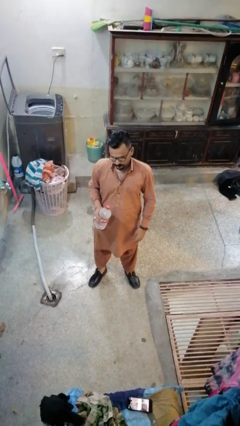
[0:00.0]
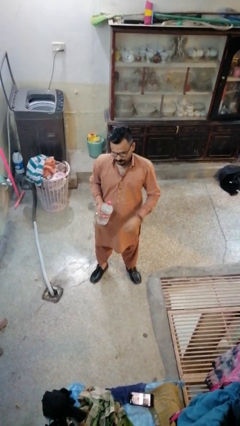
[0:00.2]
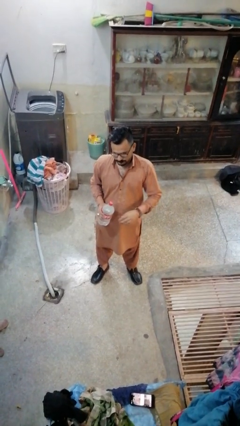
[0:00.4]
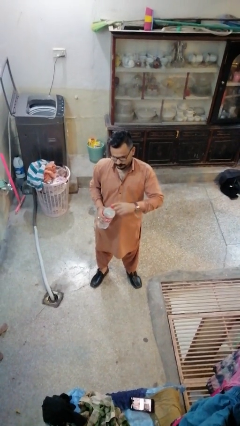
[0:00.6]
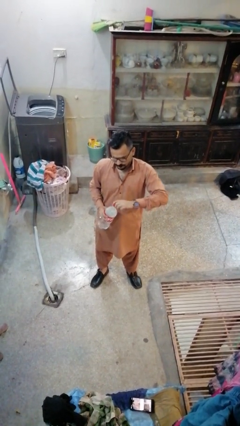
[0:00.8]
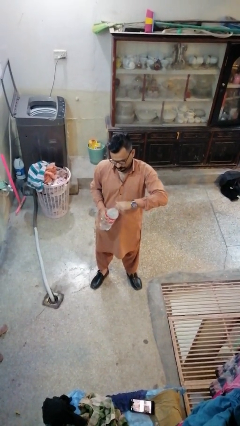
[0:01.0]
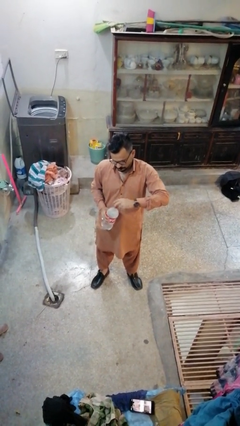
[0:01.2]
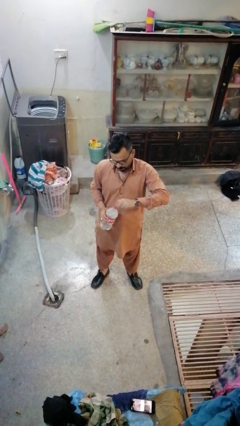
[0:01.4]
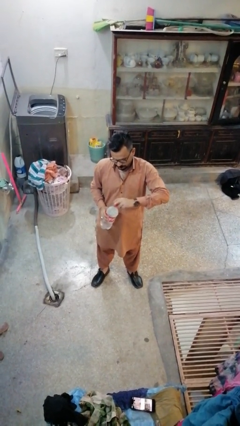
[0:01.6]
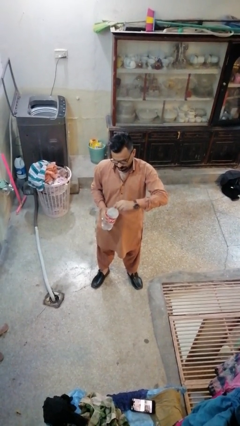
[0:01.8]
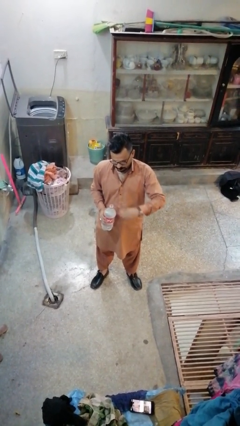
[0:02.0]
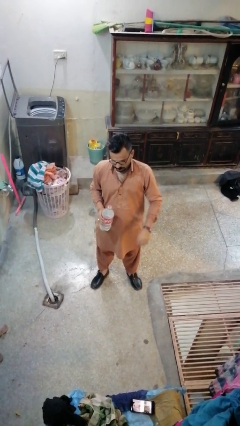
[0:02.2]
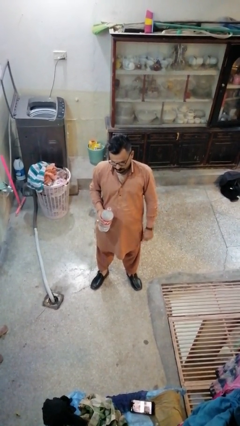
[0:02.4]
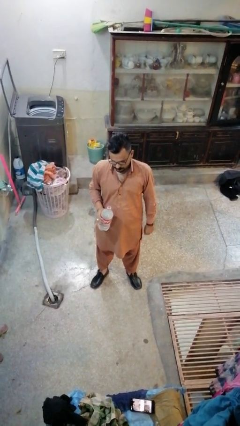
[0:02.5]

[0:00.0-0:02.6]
person unscrews lid from bottle

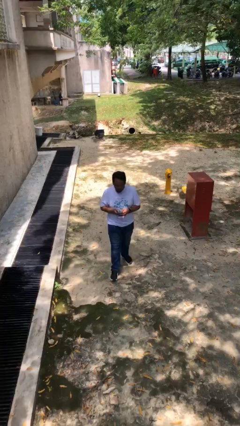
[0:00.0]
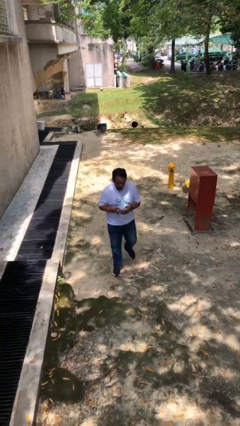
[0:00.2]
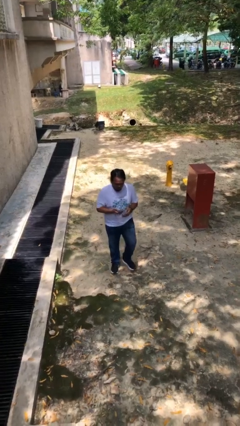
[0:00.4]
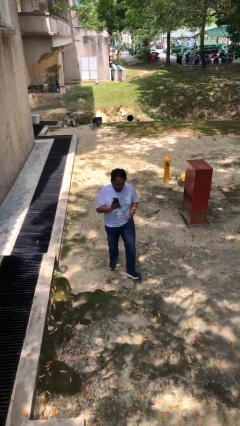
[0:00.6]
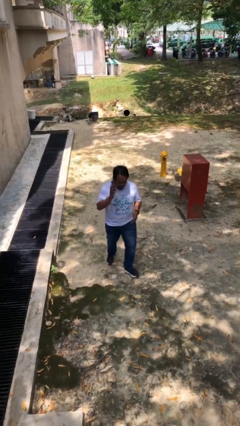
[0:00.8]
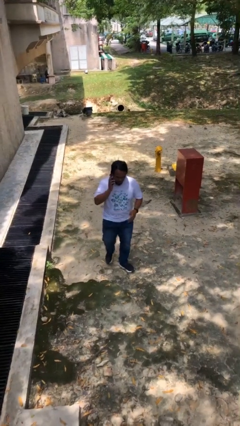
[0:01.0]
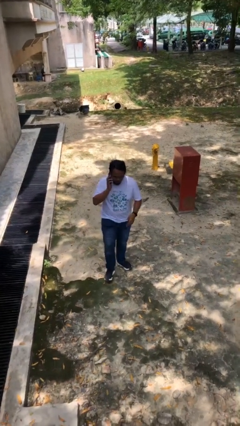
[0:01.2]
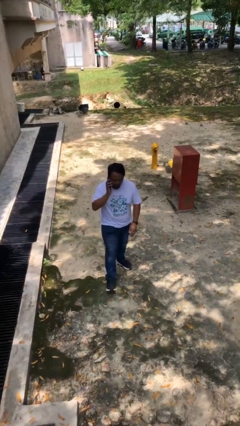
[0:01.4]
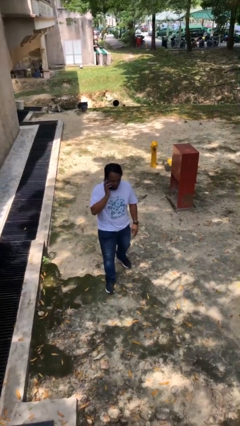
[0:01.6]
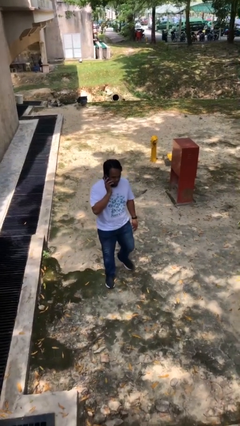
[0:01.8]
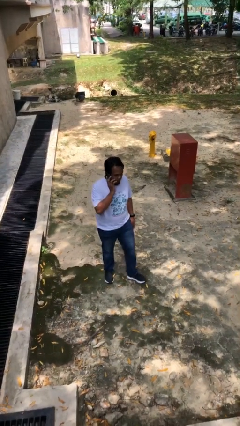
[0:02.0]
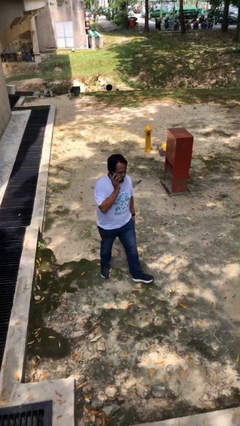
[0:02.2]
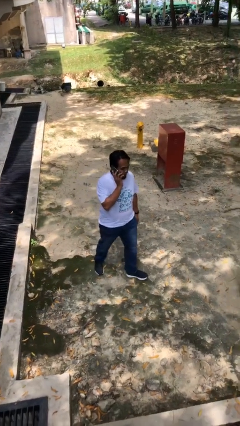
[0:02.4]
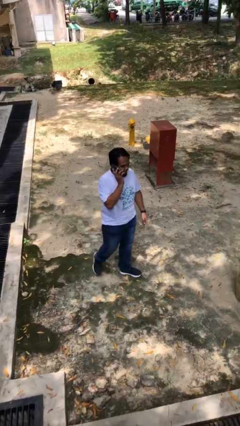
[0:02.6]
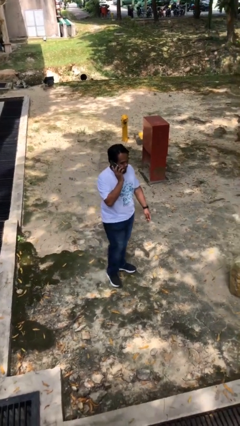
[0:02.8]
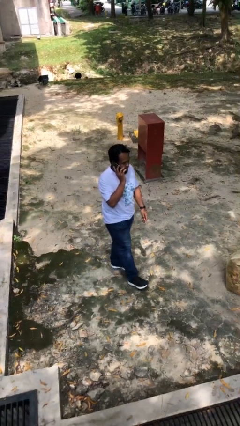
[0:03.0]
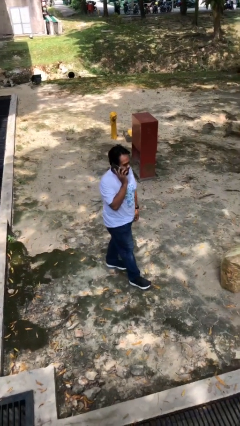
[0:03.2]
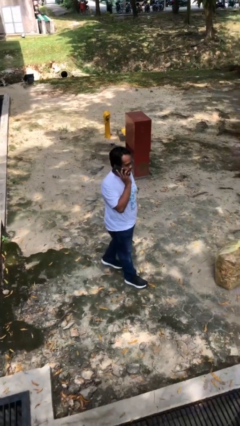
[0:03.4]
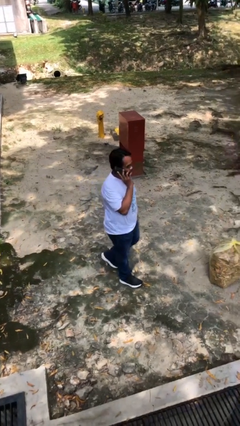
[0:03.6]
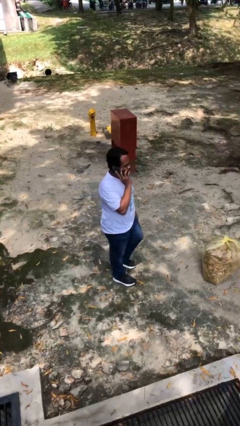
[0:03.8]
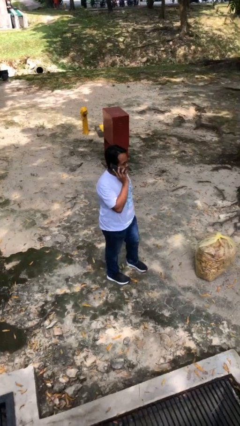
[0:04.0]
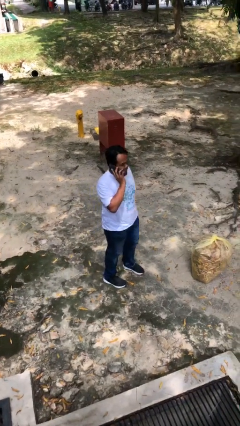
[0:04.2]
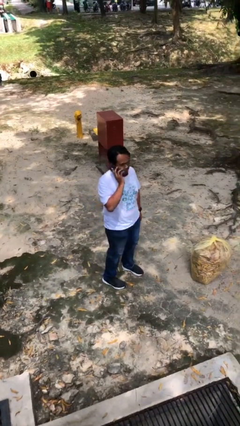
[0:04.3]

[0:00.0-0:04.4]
person talks on phone

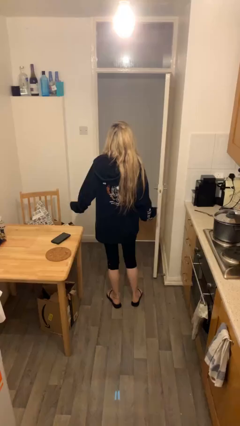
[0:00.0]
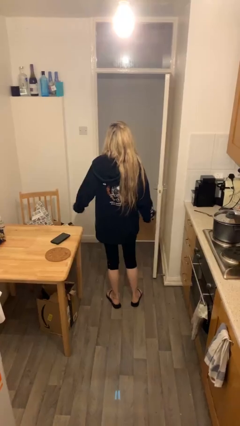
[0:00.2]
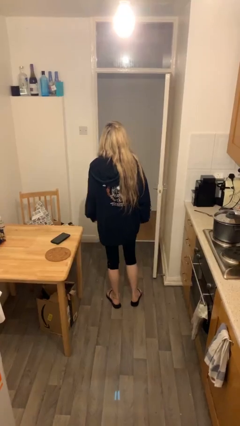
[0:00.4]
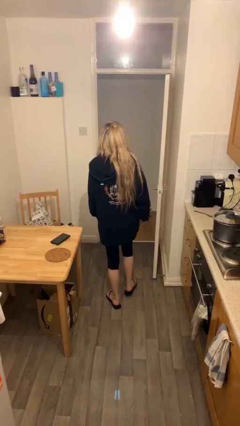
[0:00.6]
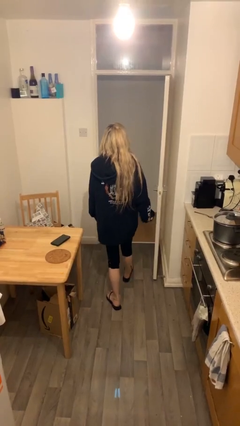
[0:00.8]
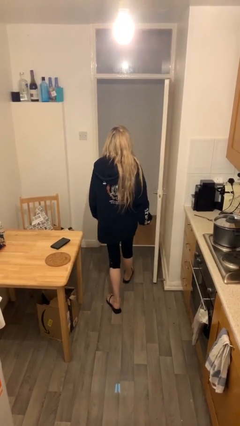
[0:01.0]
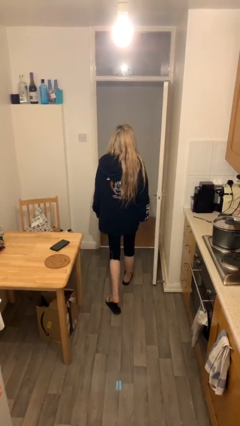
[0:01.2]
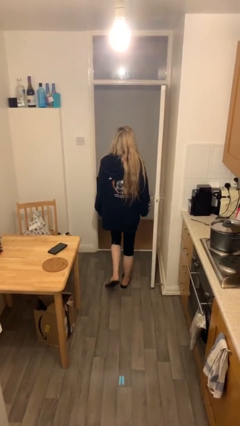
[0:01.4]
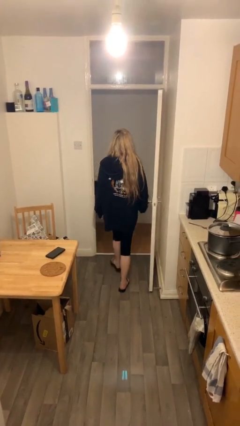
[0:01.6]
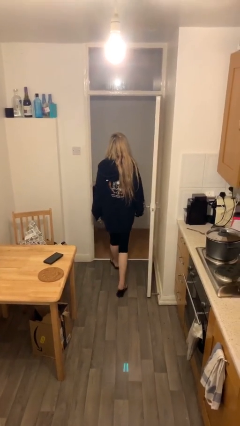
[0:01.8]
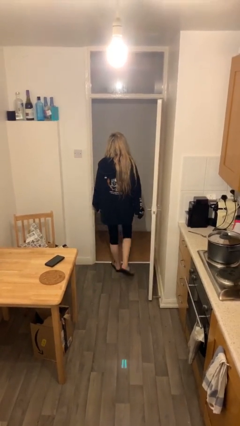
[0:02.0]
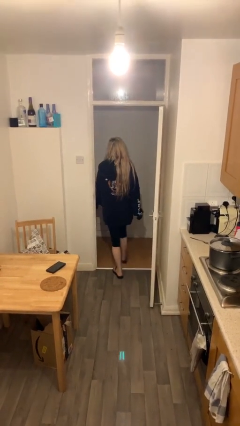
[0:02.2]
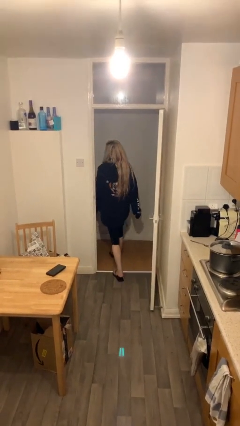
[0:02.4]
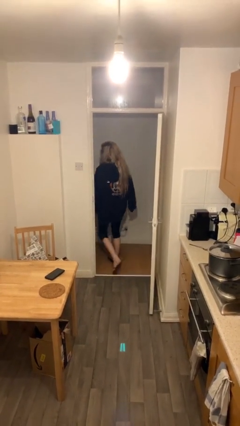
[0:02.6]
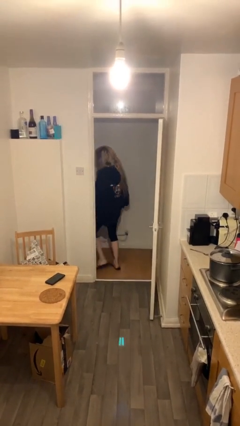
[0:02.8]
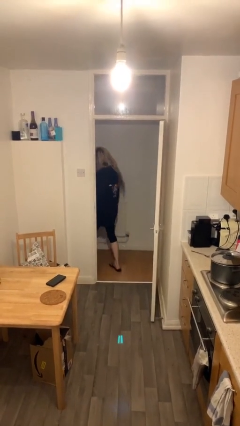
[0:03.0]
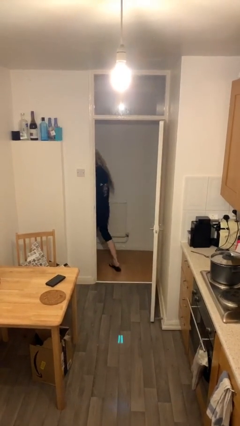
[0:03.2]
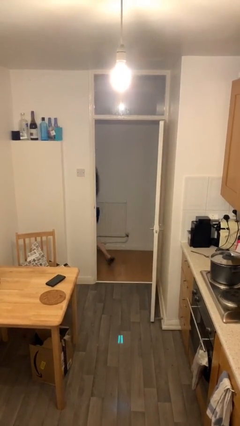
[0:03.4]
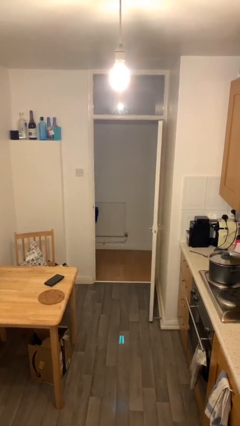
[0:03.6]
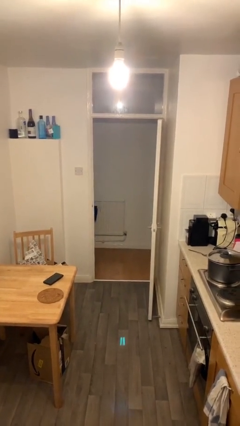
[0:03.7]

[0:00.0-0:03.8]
person exits scene through structure

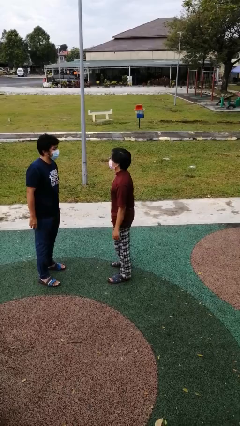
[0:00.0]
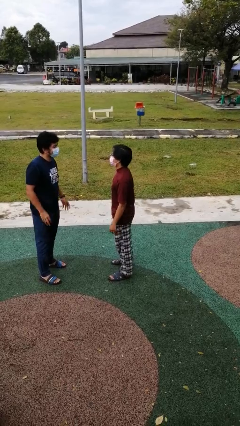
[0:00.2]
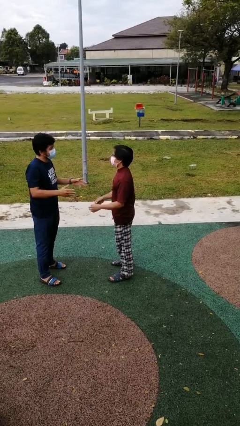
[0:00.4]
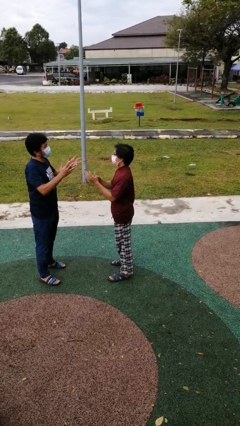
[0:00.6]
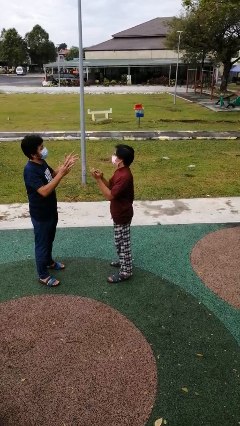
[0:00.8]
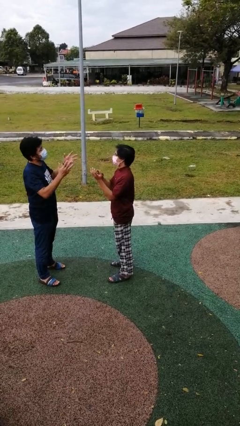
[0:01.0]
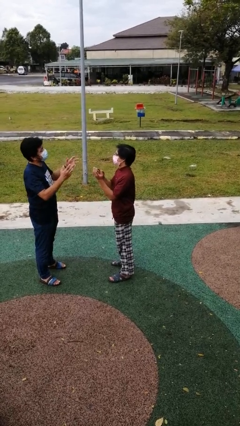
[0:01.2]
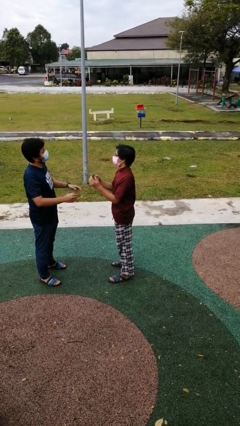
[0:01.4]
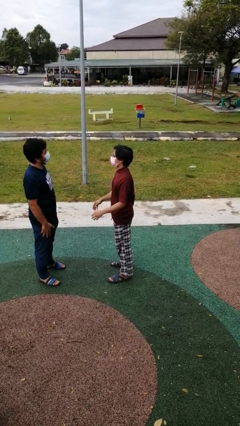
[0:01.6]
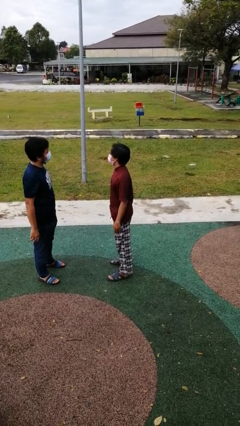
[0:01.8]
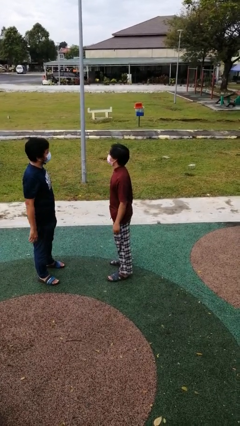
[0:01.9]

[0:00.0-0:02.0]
person talks to person

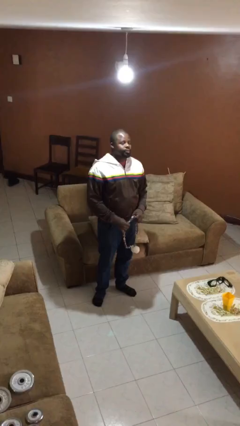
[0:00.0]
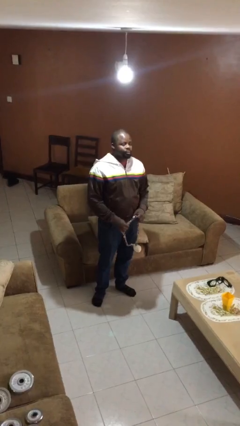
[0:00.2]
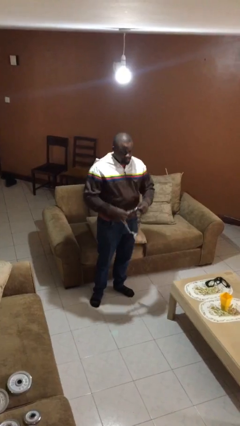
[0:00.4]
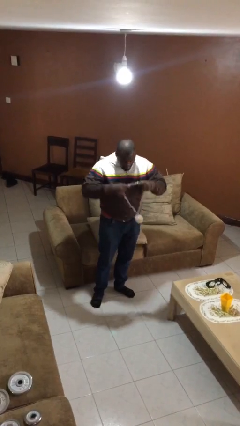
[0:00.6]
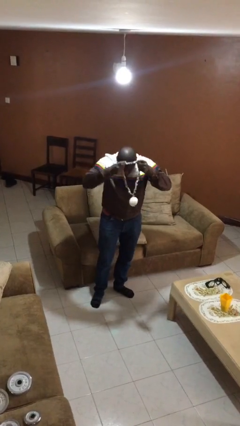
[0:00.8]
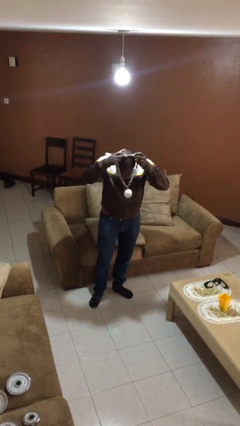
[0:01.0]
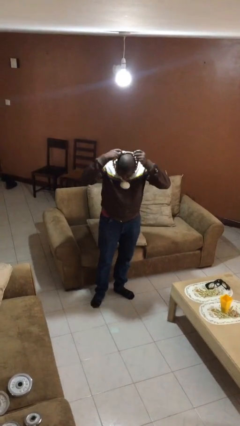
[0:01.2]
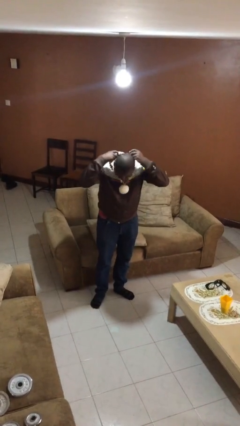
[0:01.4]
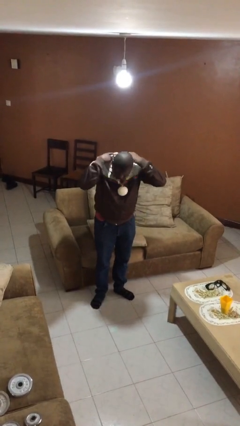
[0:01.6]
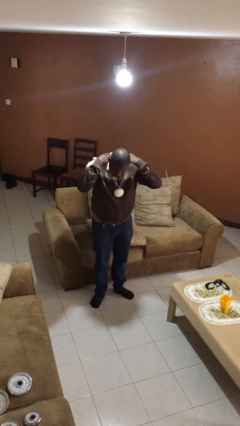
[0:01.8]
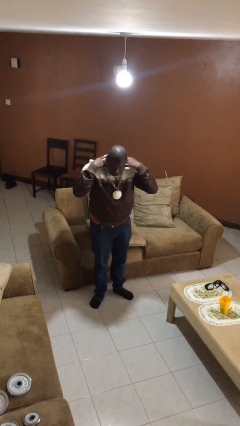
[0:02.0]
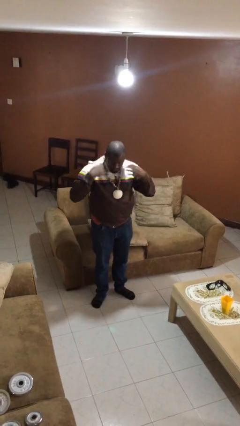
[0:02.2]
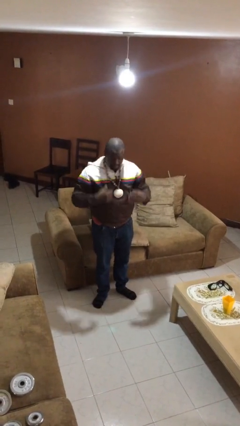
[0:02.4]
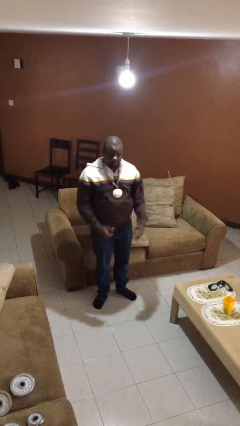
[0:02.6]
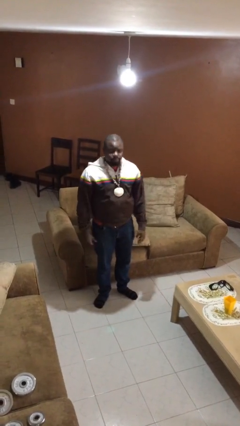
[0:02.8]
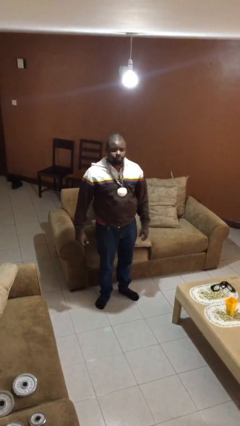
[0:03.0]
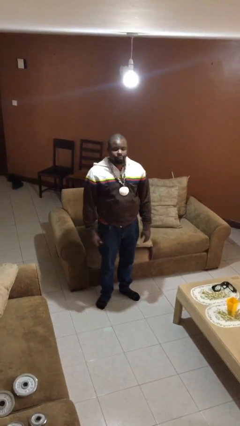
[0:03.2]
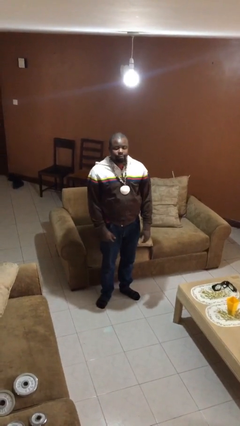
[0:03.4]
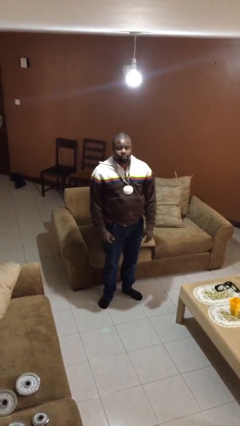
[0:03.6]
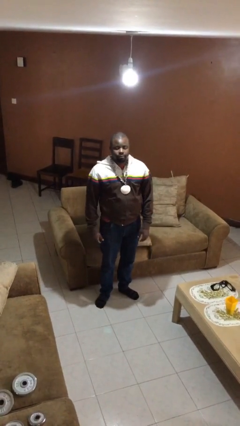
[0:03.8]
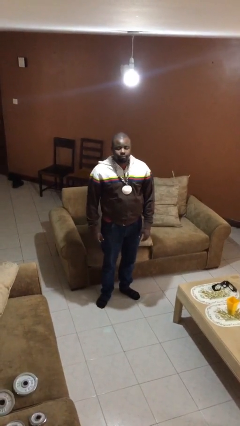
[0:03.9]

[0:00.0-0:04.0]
person puts on necklace

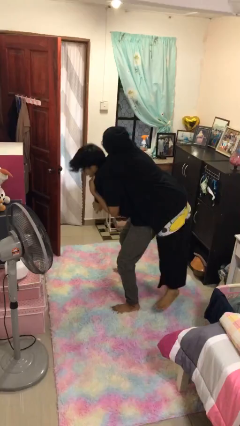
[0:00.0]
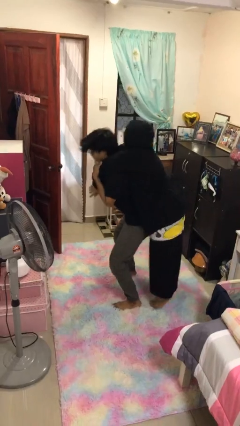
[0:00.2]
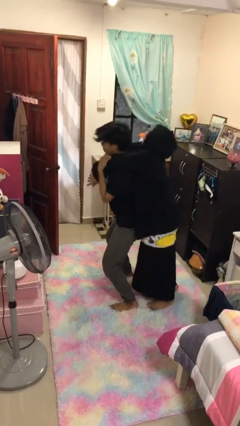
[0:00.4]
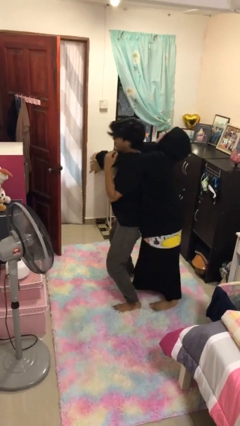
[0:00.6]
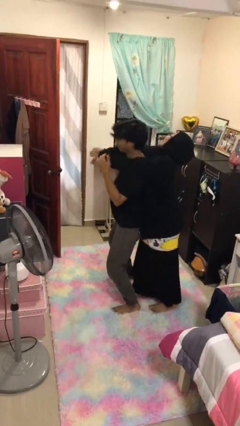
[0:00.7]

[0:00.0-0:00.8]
person puts down person
